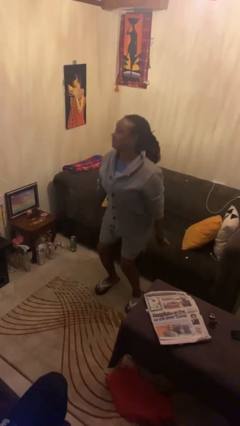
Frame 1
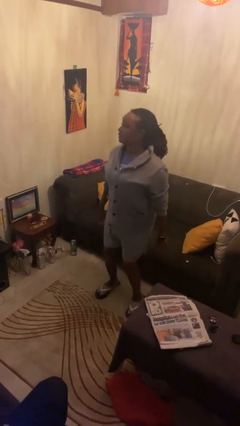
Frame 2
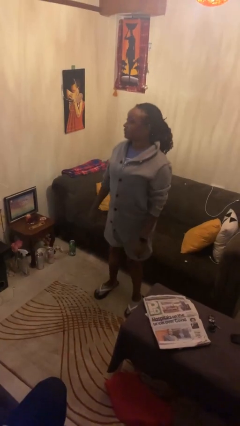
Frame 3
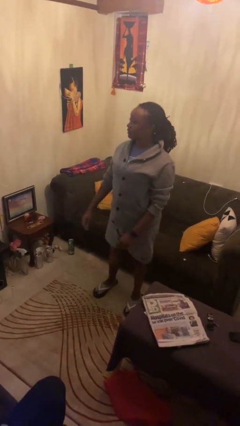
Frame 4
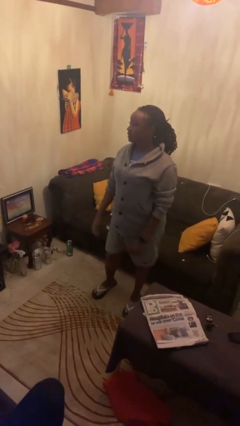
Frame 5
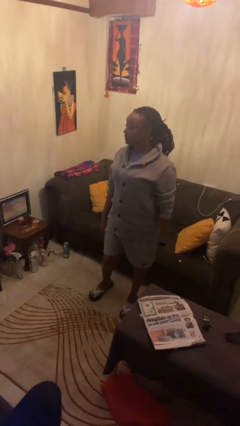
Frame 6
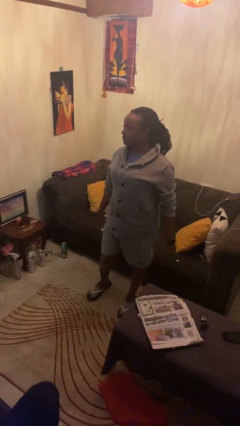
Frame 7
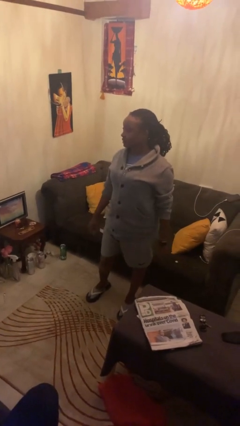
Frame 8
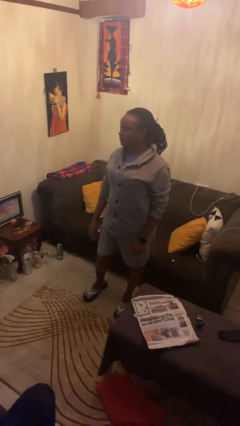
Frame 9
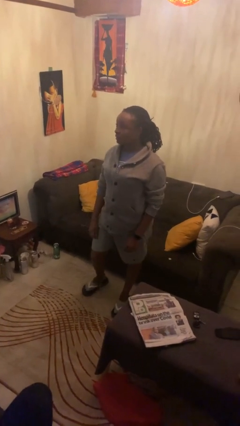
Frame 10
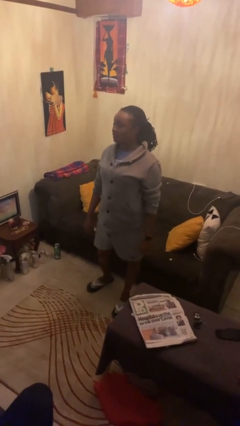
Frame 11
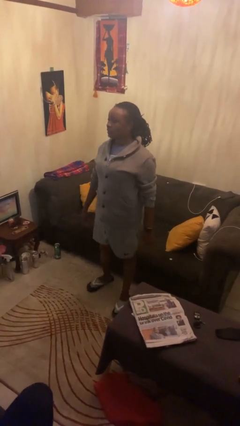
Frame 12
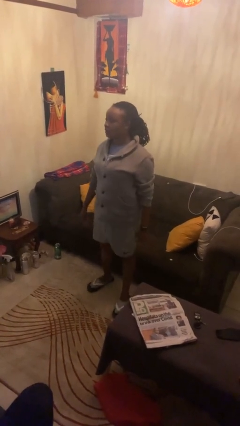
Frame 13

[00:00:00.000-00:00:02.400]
person stands up

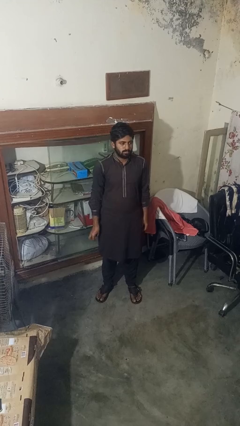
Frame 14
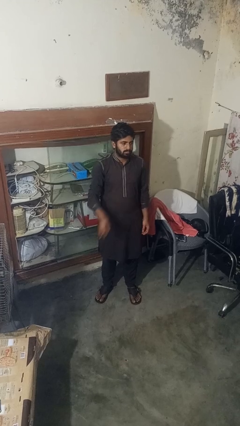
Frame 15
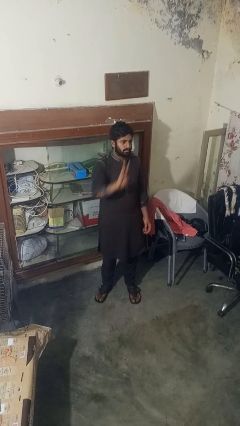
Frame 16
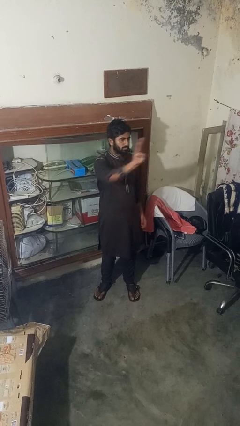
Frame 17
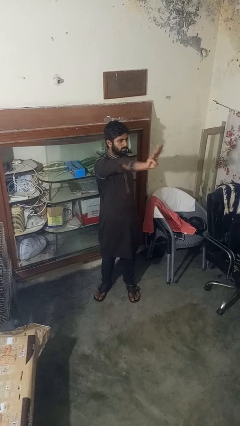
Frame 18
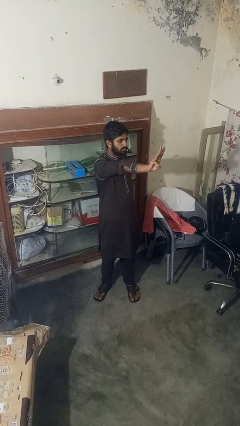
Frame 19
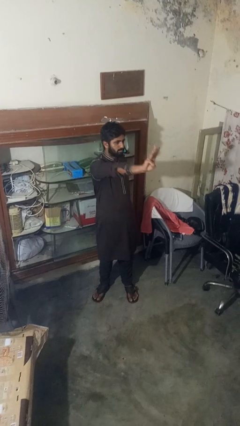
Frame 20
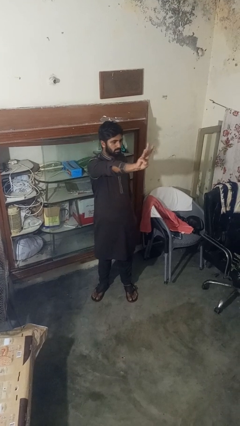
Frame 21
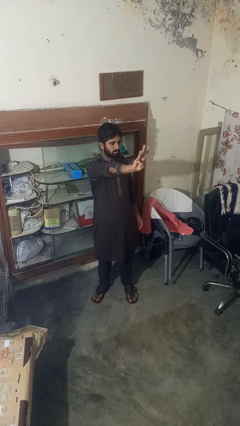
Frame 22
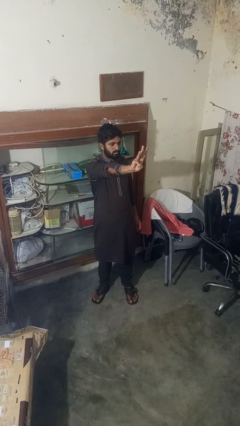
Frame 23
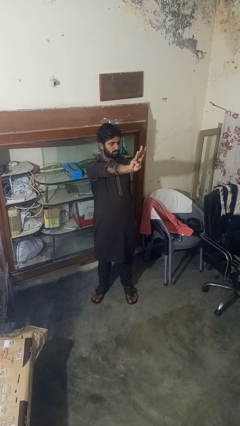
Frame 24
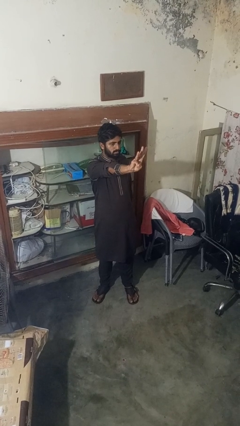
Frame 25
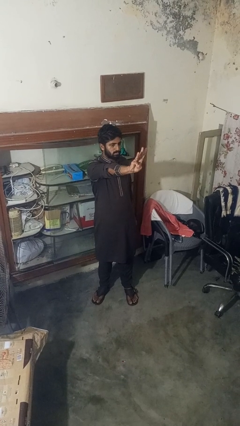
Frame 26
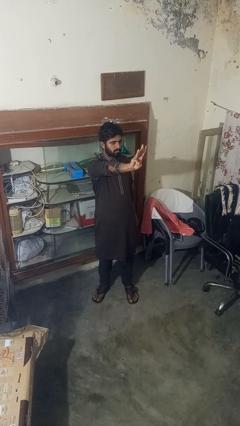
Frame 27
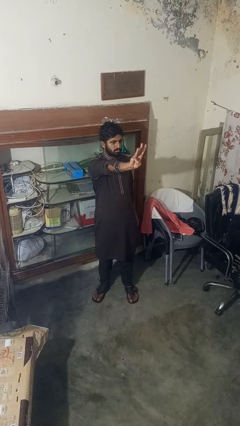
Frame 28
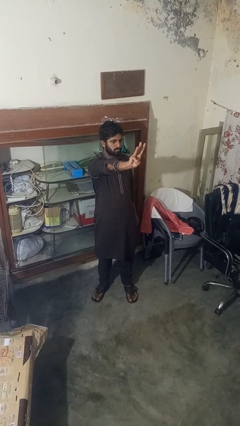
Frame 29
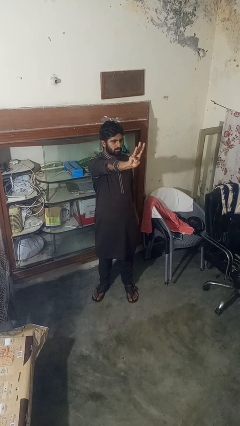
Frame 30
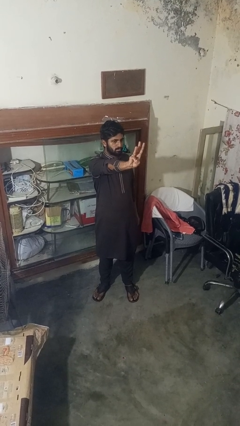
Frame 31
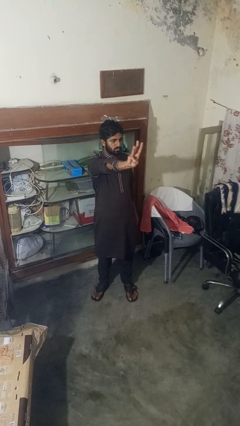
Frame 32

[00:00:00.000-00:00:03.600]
person gestures number three

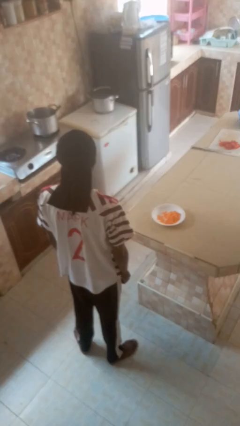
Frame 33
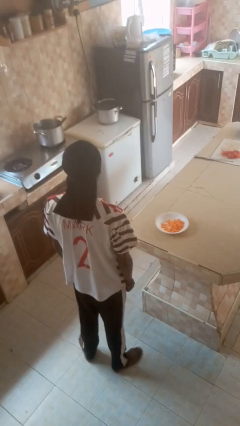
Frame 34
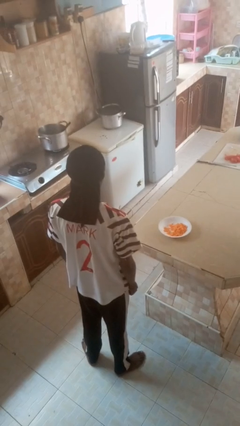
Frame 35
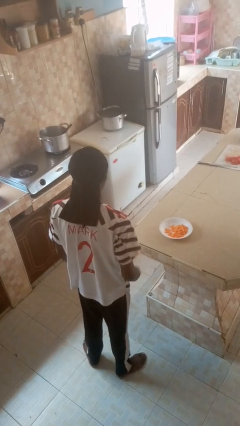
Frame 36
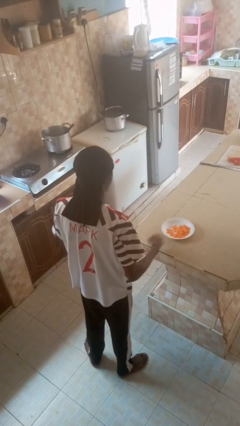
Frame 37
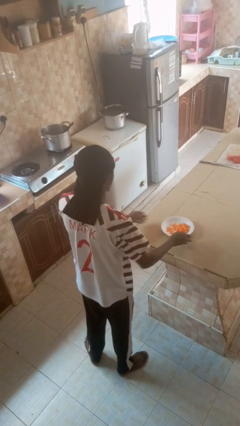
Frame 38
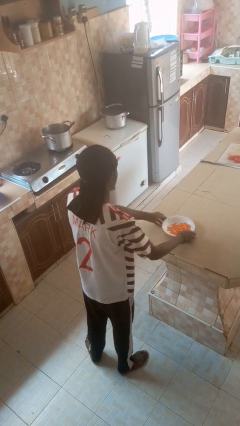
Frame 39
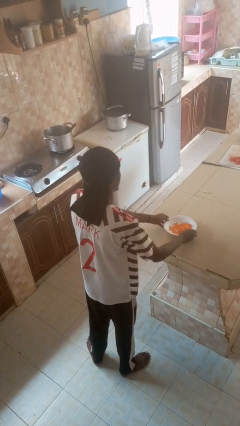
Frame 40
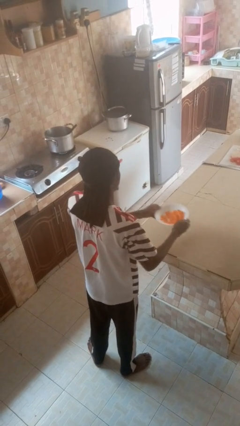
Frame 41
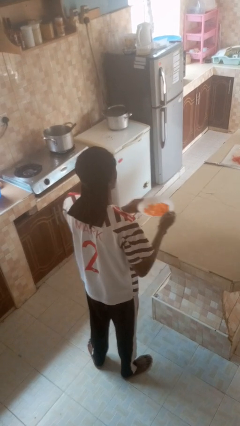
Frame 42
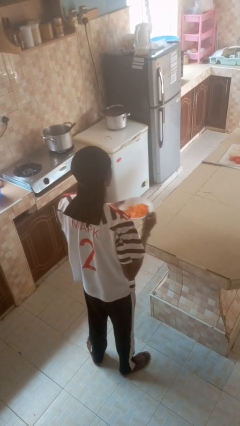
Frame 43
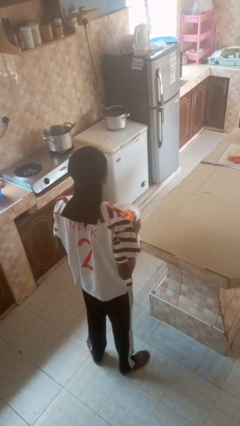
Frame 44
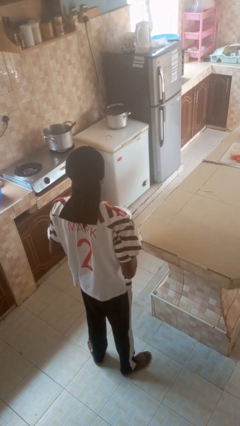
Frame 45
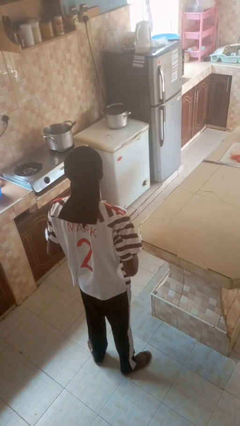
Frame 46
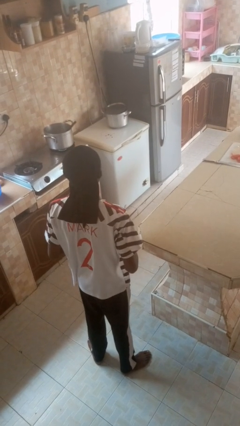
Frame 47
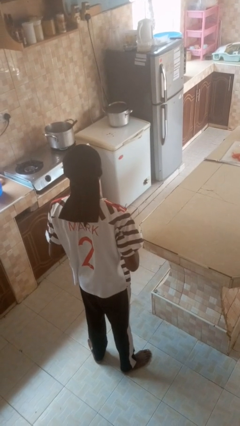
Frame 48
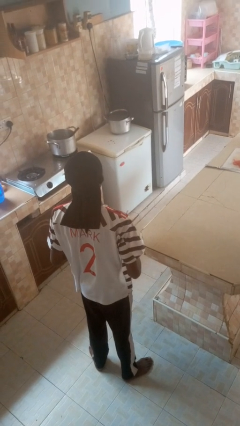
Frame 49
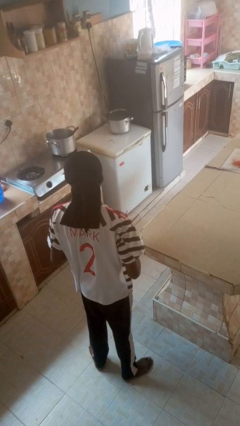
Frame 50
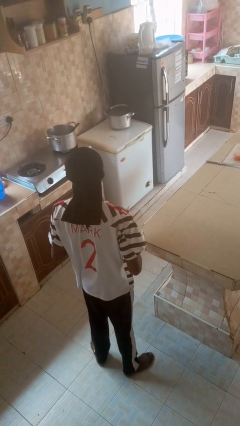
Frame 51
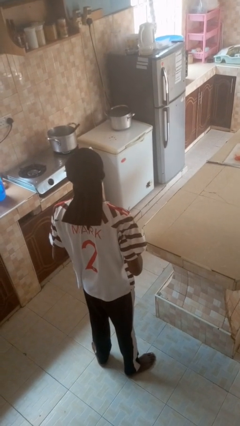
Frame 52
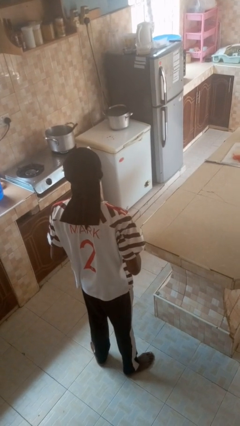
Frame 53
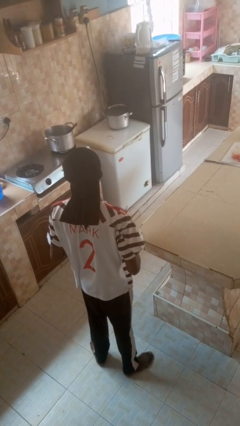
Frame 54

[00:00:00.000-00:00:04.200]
person picks up object from countertop

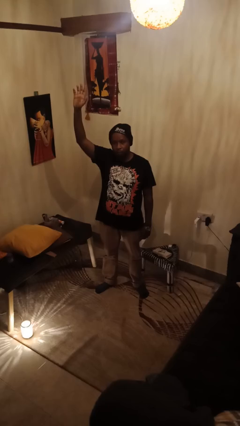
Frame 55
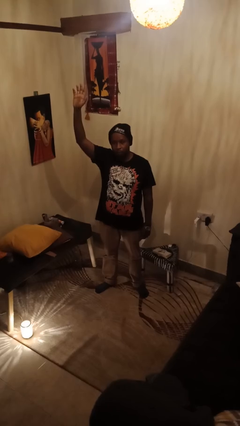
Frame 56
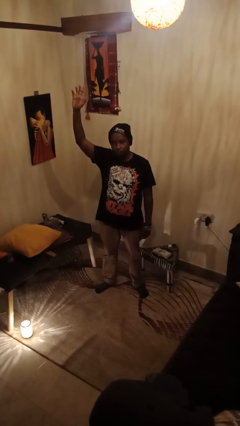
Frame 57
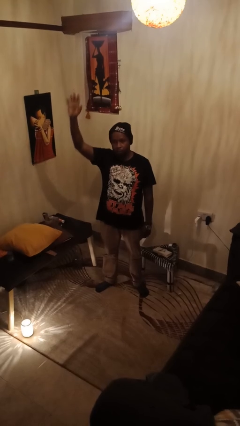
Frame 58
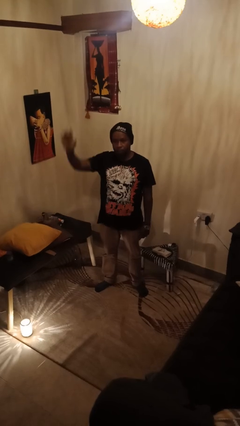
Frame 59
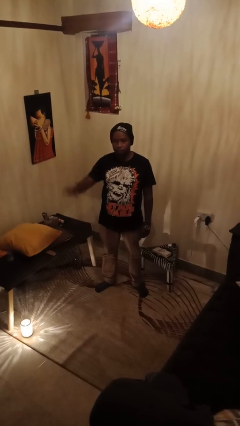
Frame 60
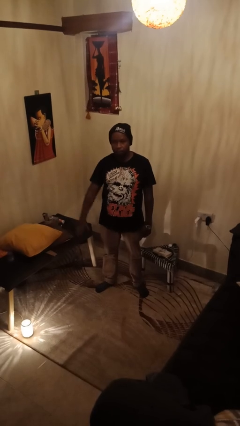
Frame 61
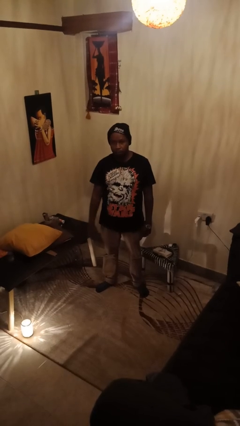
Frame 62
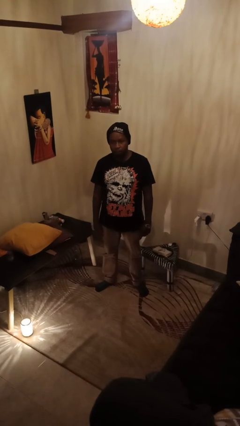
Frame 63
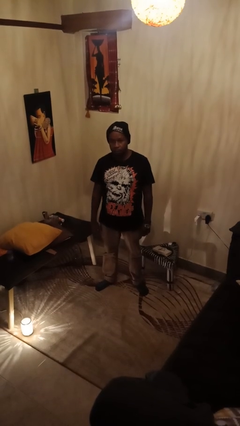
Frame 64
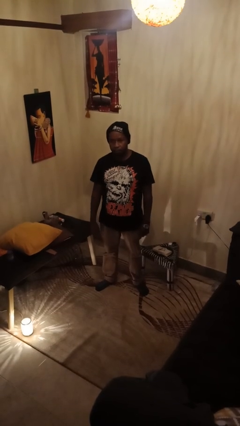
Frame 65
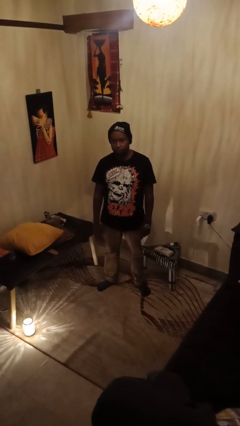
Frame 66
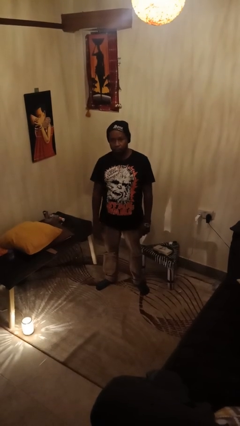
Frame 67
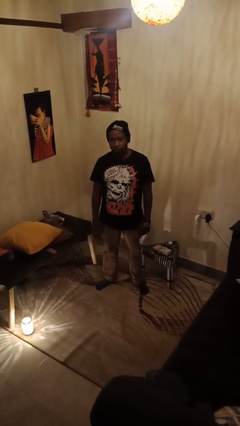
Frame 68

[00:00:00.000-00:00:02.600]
person gestures lower hand

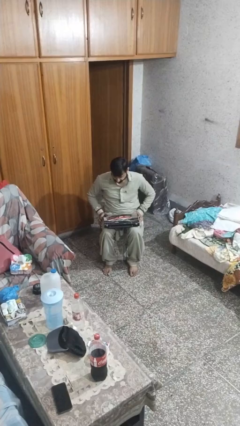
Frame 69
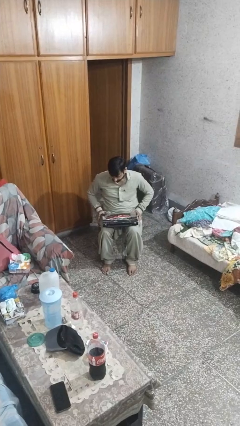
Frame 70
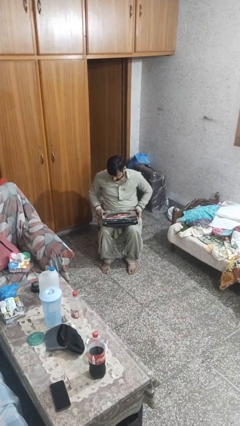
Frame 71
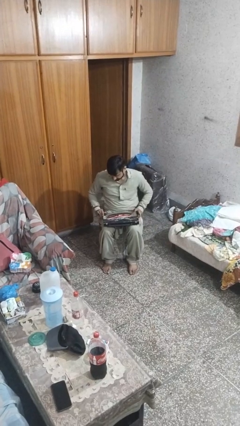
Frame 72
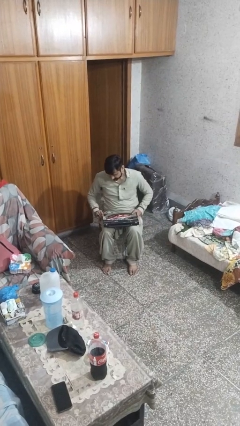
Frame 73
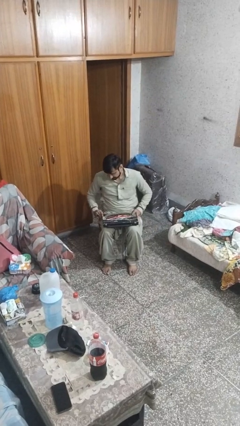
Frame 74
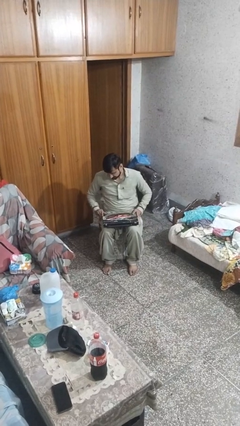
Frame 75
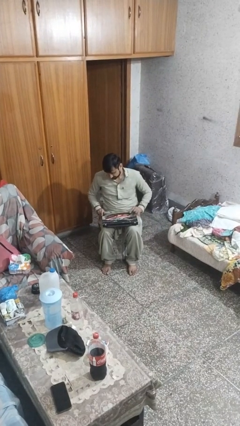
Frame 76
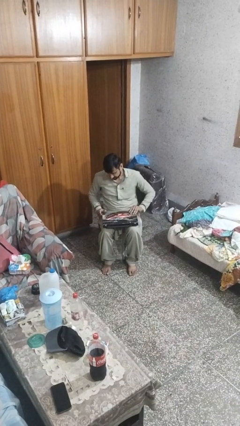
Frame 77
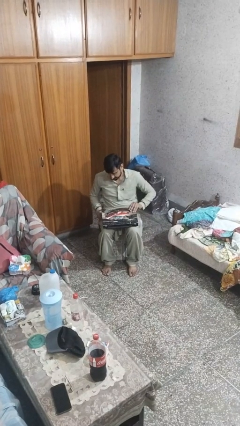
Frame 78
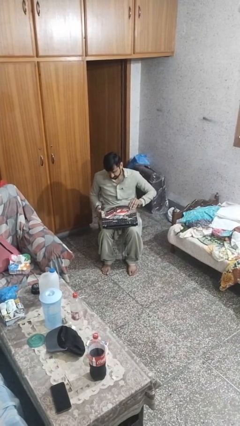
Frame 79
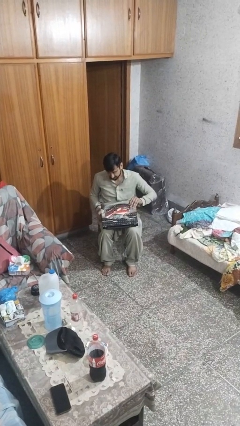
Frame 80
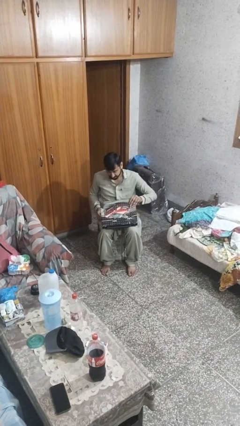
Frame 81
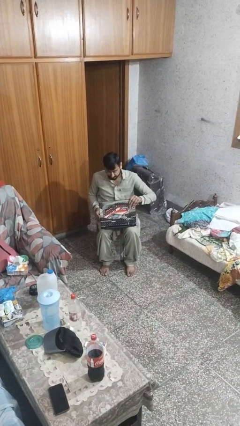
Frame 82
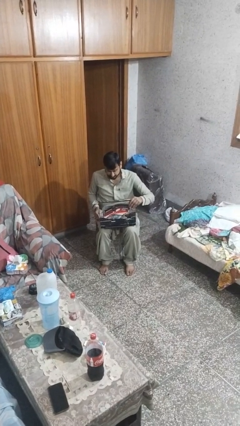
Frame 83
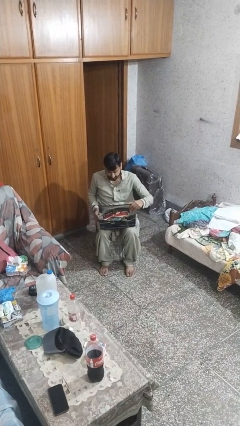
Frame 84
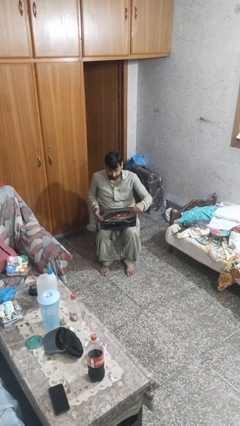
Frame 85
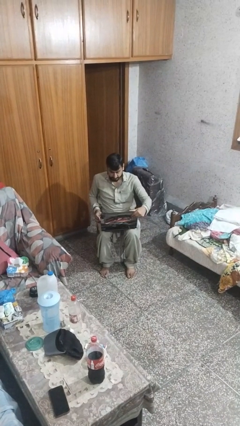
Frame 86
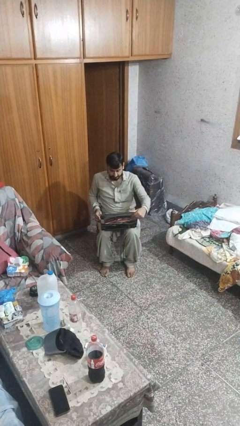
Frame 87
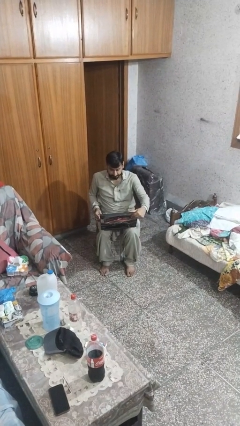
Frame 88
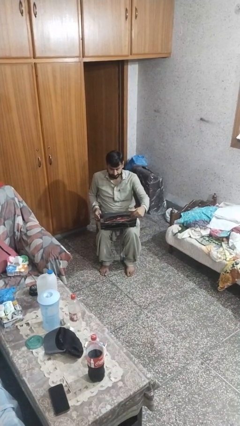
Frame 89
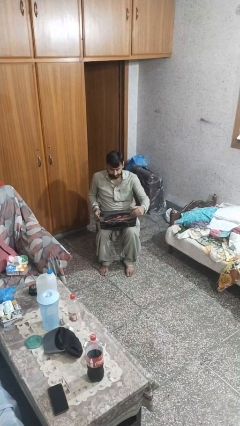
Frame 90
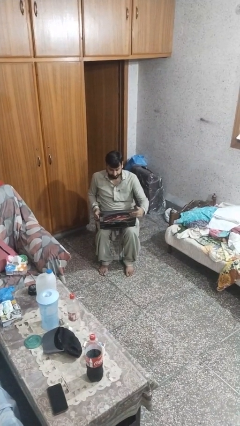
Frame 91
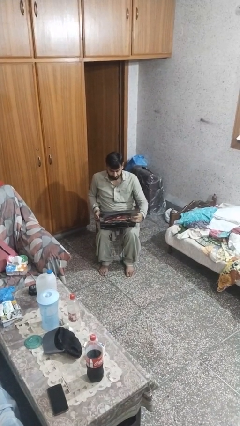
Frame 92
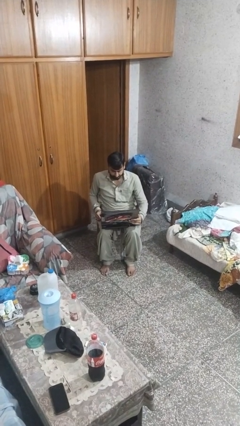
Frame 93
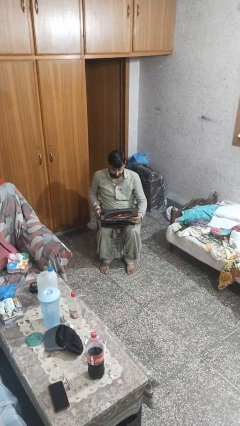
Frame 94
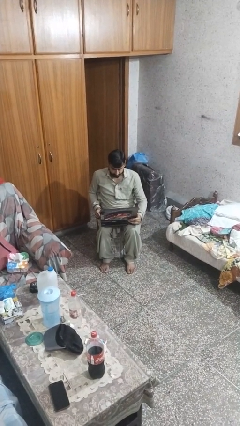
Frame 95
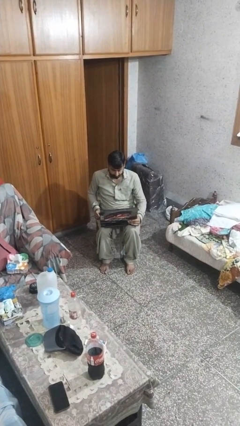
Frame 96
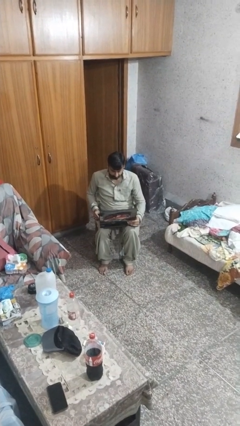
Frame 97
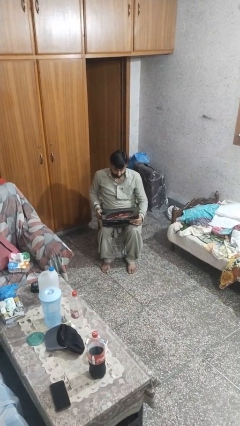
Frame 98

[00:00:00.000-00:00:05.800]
person opens laptop
